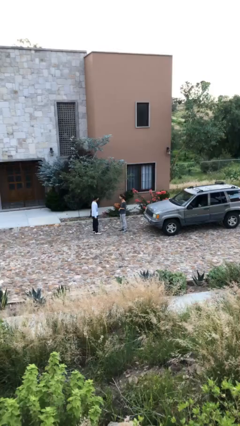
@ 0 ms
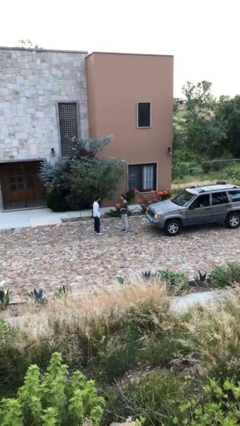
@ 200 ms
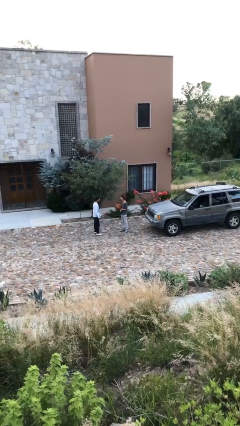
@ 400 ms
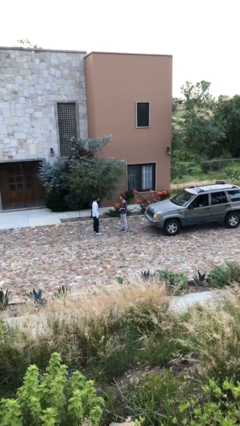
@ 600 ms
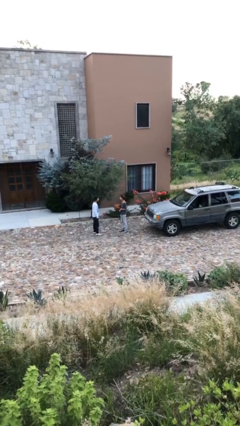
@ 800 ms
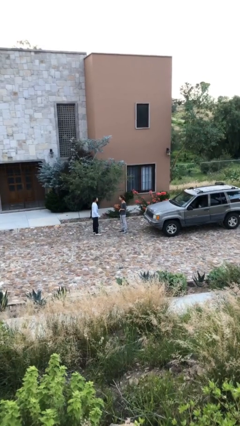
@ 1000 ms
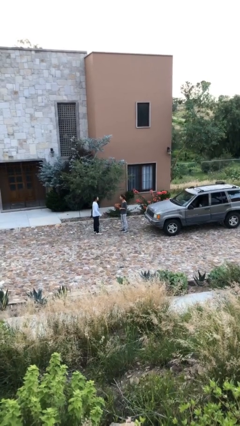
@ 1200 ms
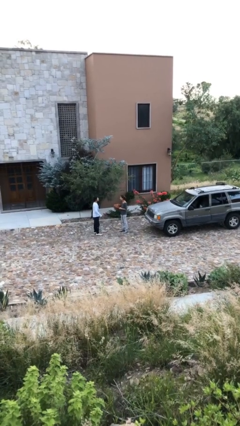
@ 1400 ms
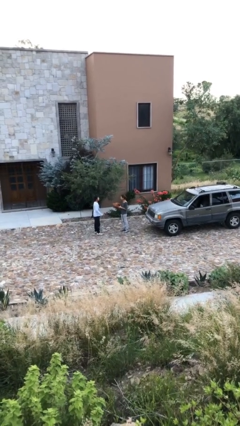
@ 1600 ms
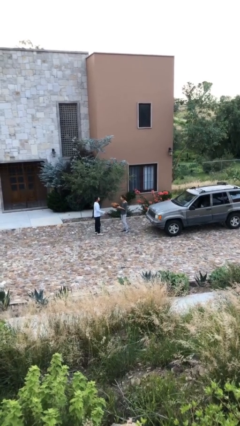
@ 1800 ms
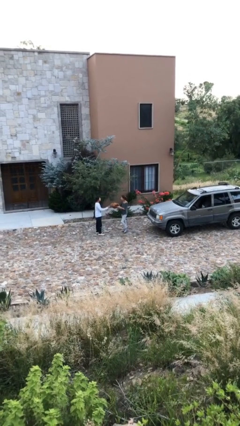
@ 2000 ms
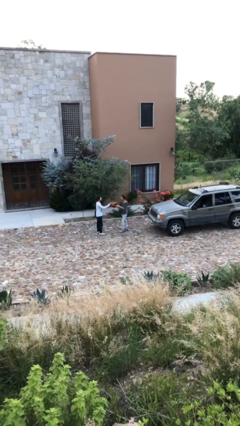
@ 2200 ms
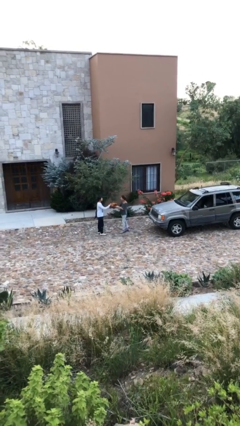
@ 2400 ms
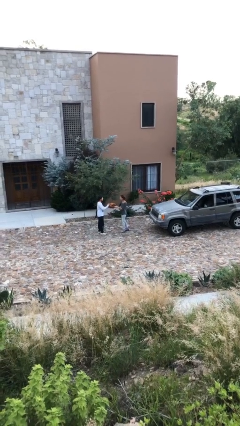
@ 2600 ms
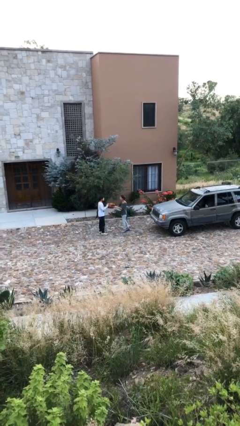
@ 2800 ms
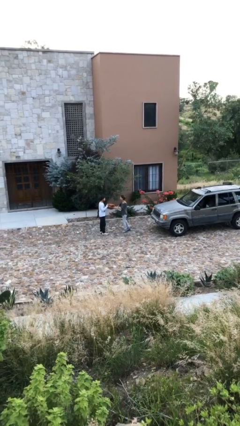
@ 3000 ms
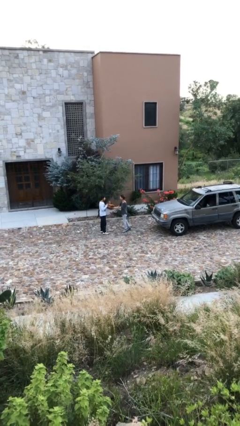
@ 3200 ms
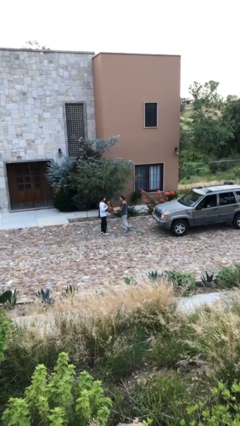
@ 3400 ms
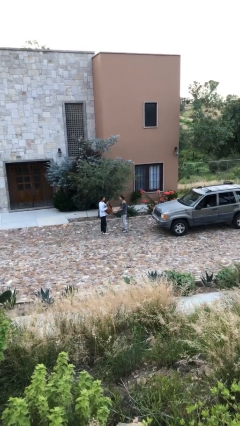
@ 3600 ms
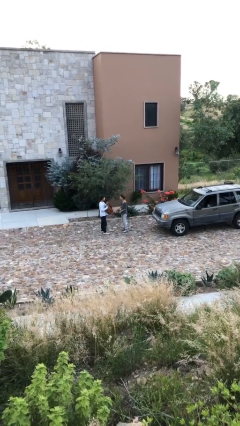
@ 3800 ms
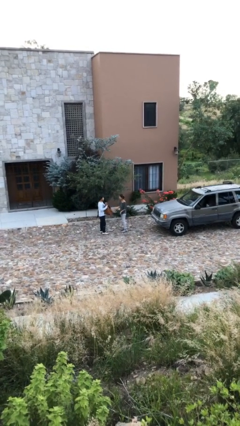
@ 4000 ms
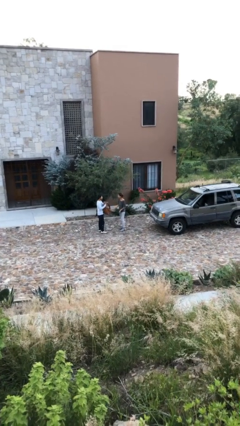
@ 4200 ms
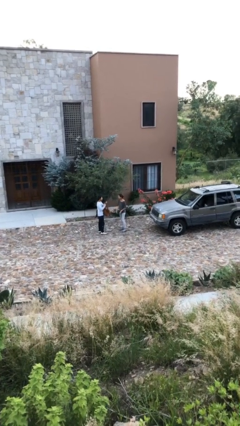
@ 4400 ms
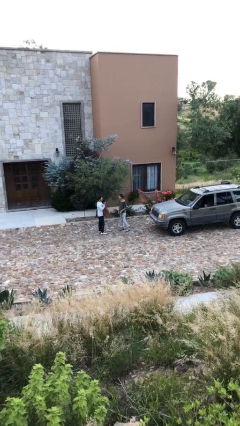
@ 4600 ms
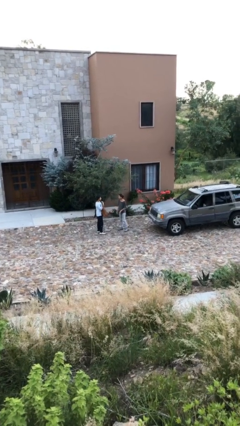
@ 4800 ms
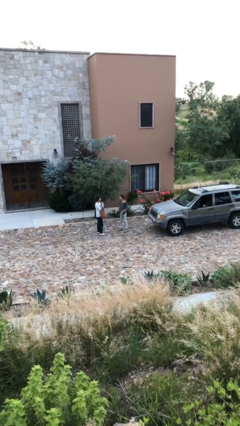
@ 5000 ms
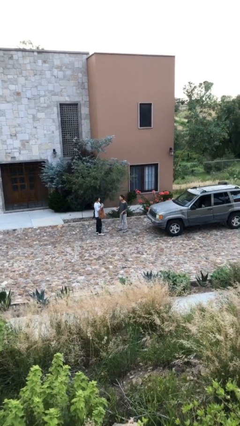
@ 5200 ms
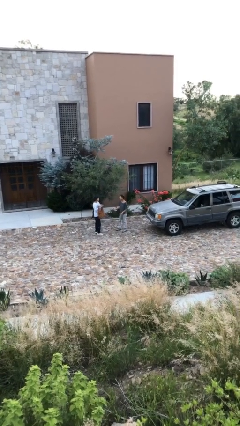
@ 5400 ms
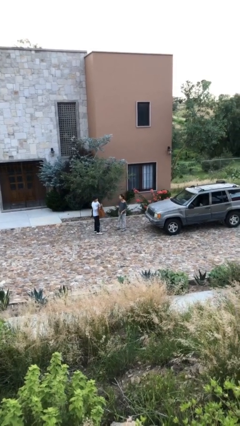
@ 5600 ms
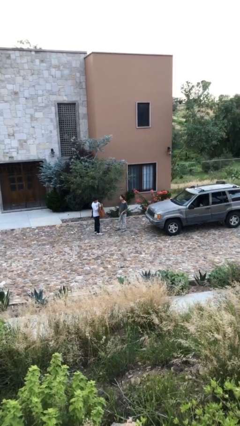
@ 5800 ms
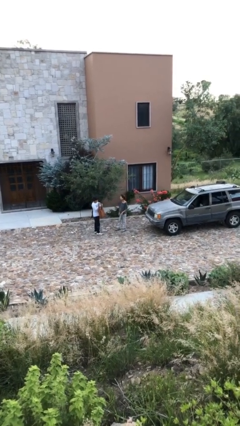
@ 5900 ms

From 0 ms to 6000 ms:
person transfers object to person

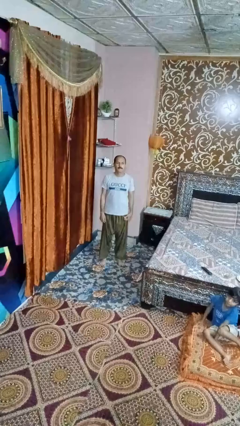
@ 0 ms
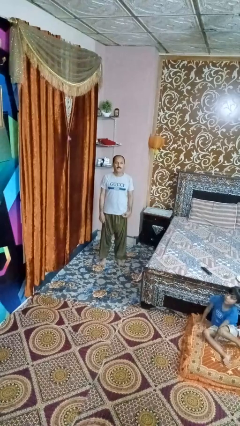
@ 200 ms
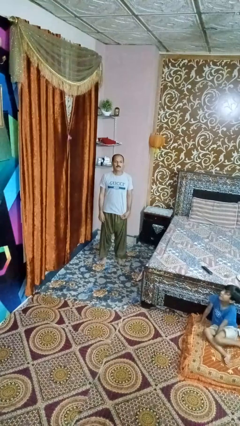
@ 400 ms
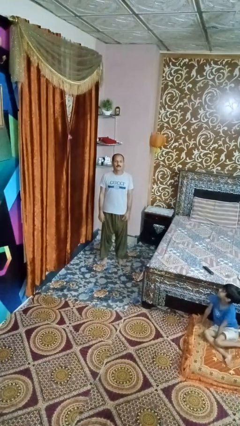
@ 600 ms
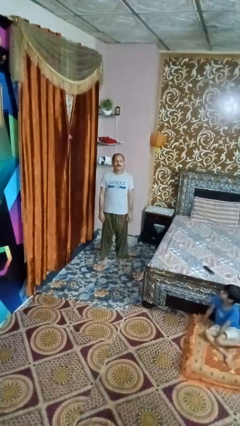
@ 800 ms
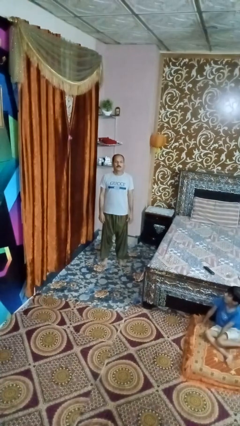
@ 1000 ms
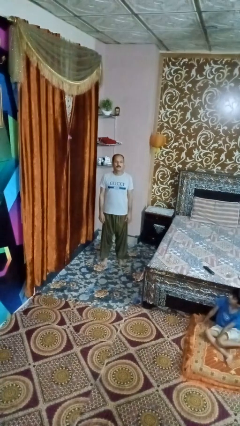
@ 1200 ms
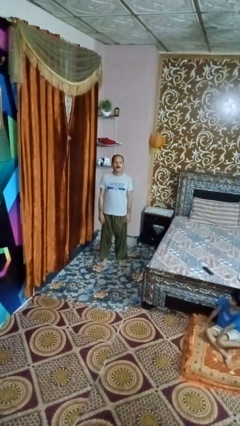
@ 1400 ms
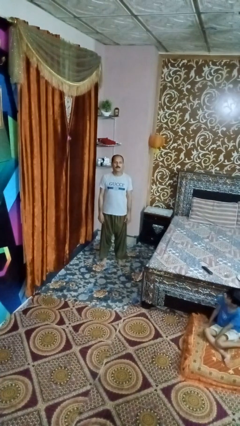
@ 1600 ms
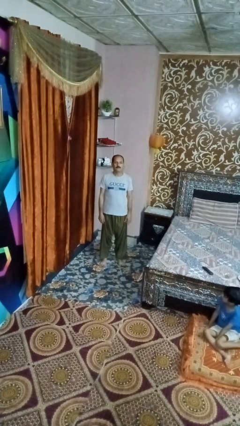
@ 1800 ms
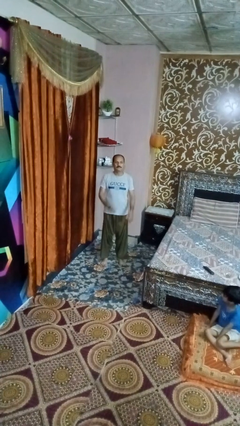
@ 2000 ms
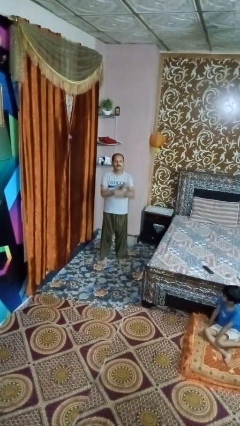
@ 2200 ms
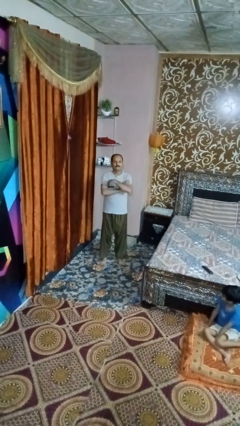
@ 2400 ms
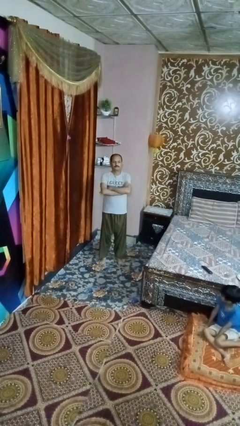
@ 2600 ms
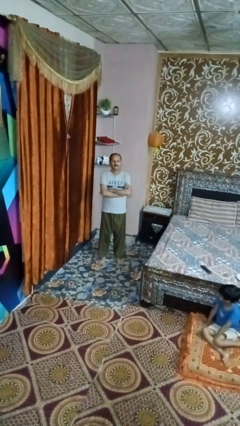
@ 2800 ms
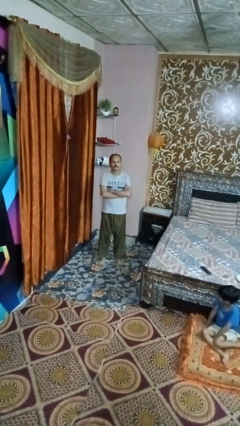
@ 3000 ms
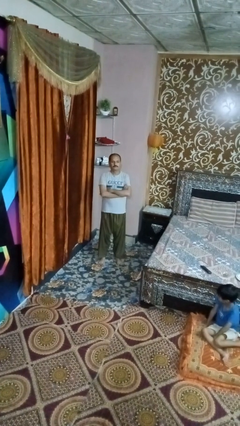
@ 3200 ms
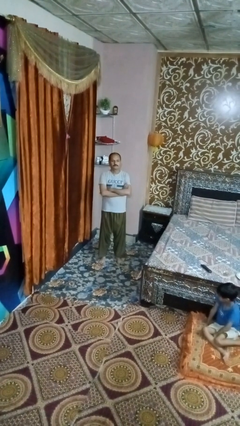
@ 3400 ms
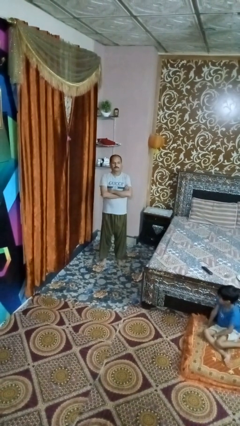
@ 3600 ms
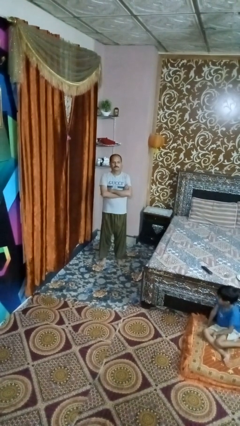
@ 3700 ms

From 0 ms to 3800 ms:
person crosses arms

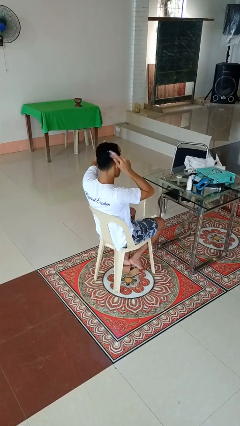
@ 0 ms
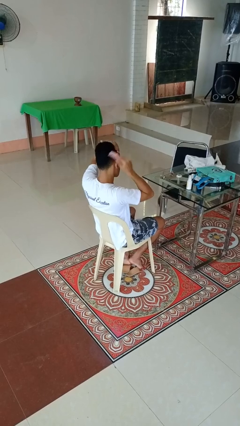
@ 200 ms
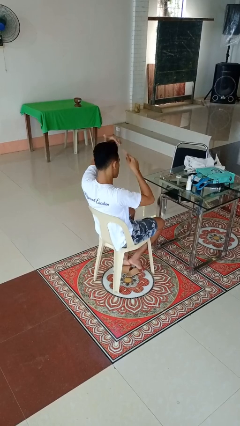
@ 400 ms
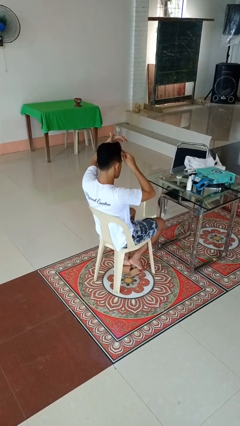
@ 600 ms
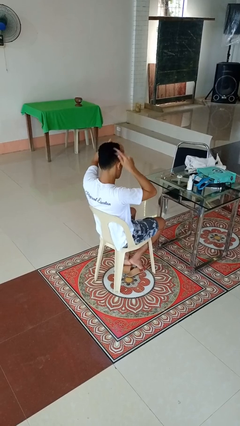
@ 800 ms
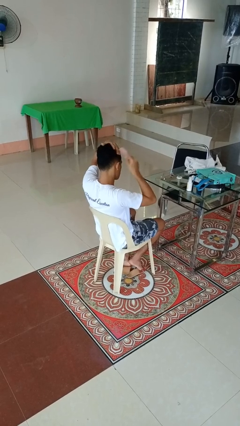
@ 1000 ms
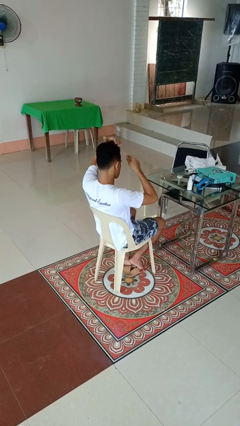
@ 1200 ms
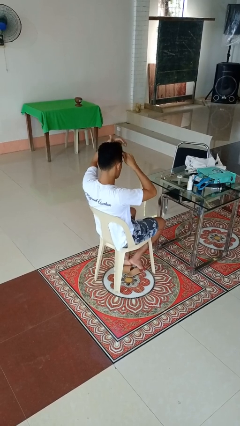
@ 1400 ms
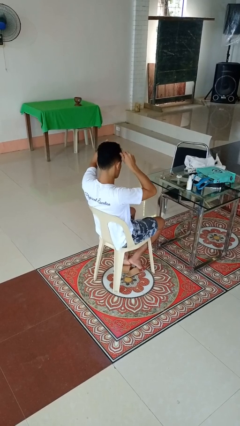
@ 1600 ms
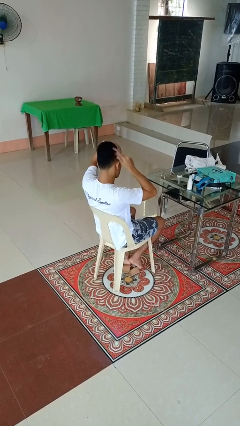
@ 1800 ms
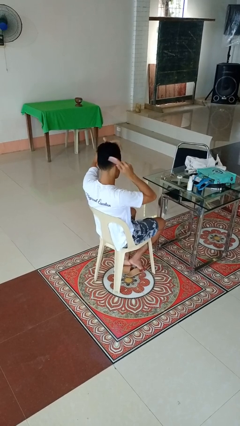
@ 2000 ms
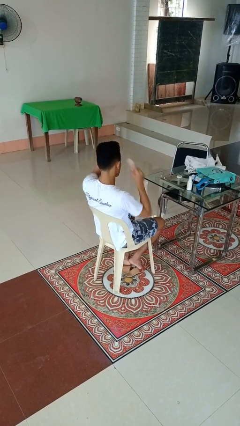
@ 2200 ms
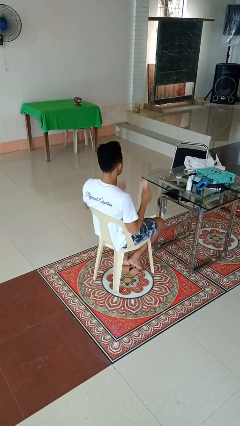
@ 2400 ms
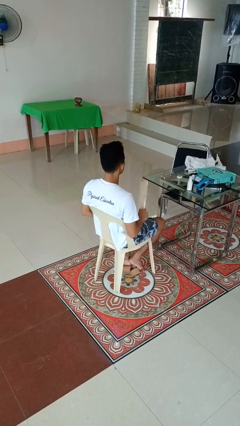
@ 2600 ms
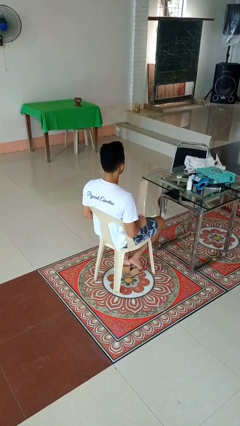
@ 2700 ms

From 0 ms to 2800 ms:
person brushes hair

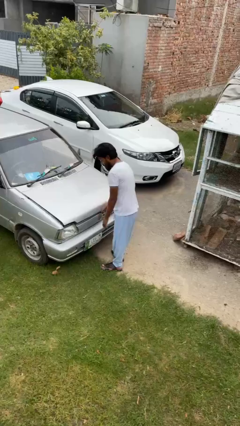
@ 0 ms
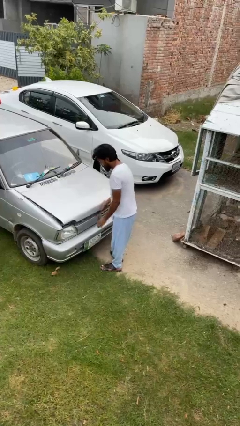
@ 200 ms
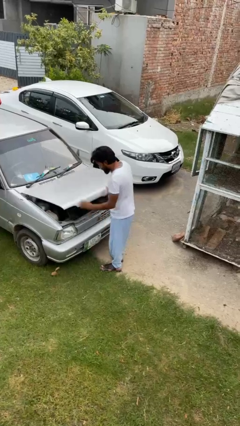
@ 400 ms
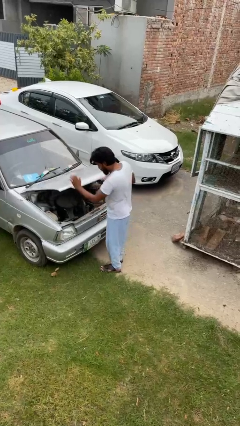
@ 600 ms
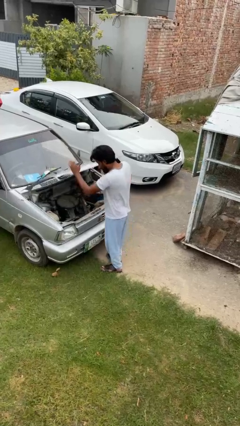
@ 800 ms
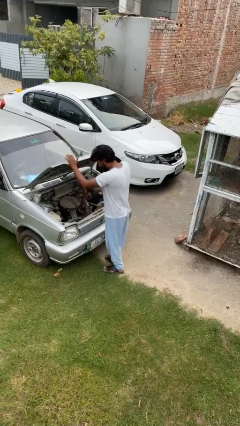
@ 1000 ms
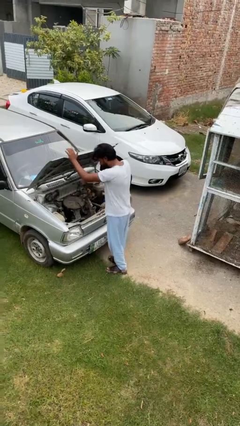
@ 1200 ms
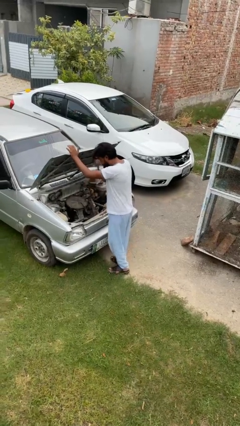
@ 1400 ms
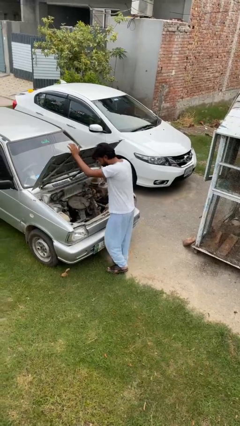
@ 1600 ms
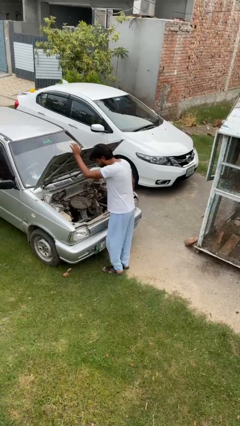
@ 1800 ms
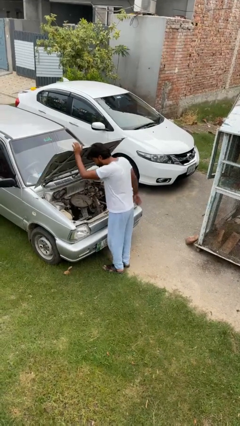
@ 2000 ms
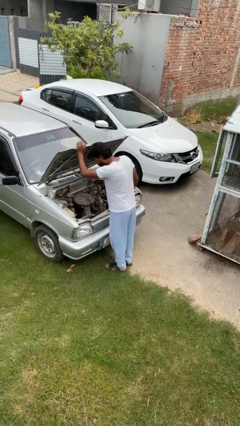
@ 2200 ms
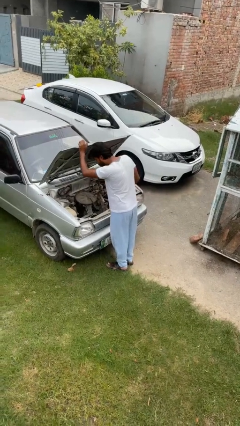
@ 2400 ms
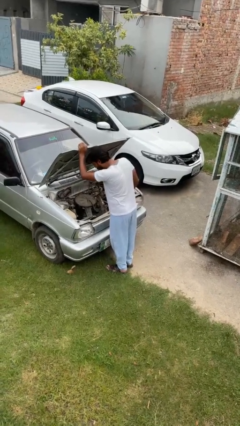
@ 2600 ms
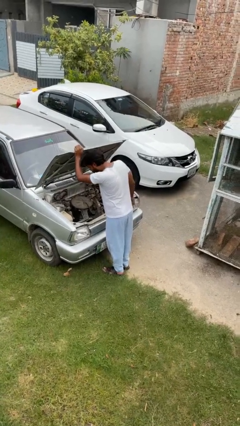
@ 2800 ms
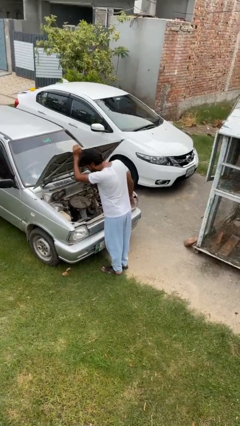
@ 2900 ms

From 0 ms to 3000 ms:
person opens car hood

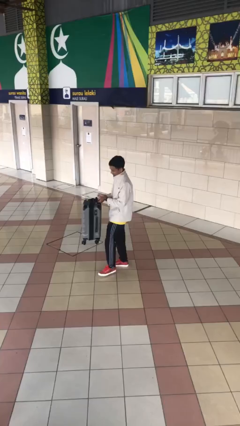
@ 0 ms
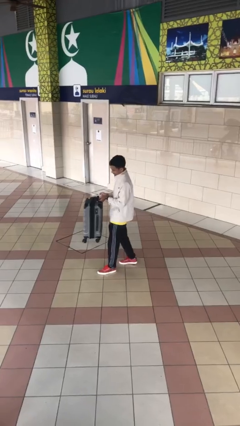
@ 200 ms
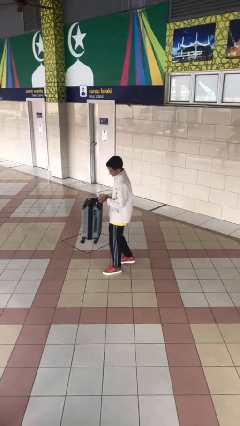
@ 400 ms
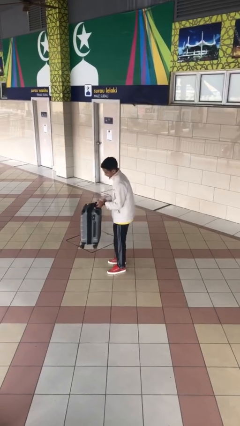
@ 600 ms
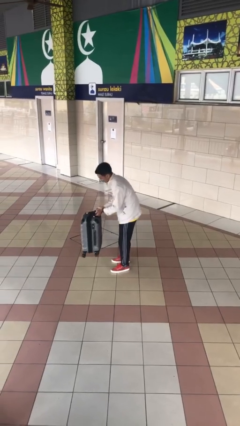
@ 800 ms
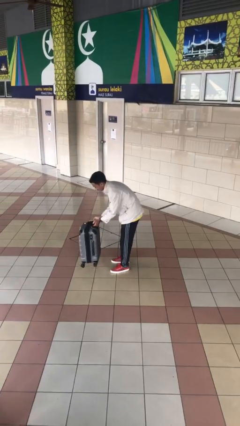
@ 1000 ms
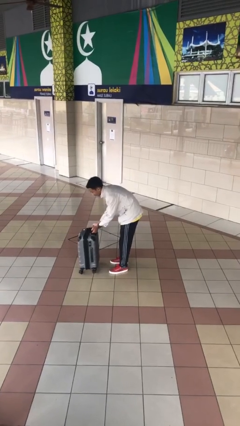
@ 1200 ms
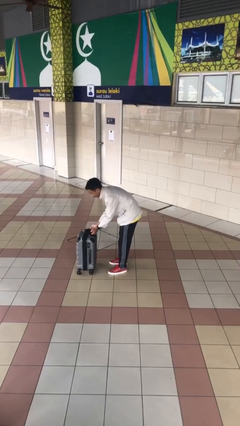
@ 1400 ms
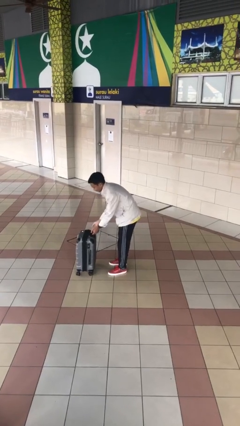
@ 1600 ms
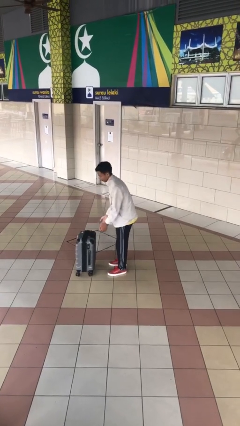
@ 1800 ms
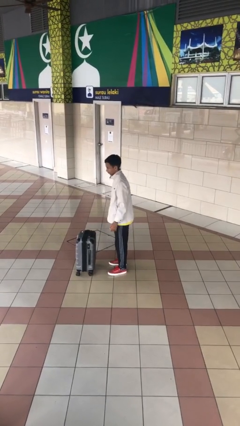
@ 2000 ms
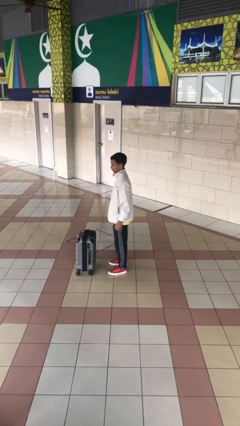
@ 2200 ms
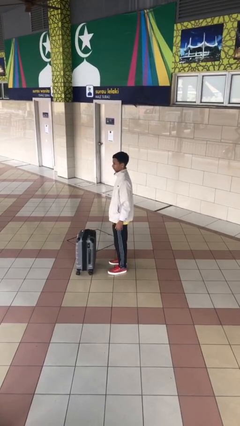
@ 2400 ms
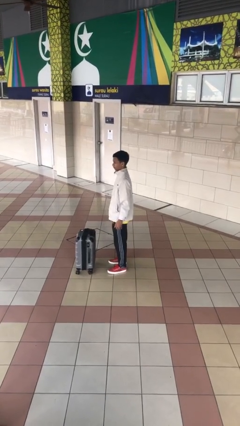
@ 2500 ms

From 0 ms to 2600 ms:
person puts down object on floor
